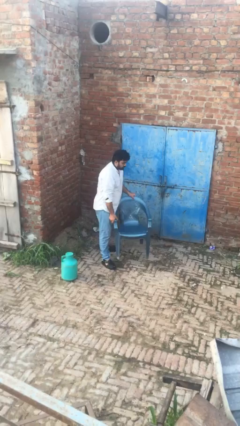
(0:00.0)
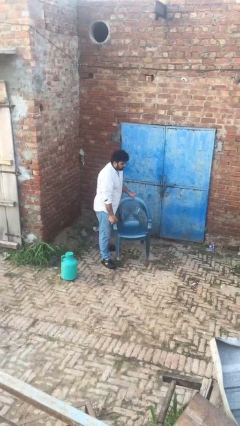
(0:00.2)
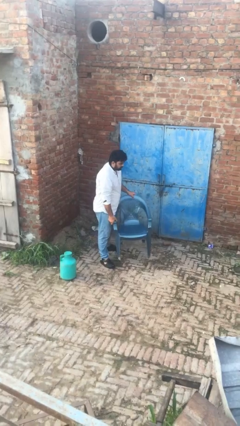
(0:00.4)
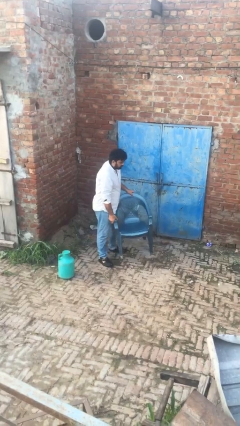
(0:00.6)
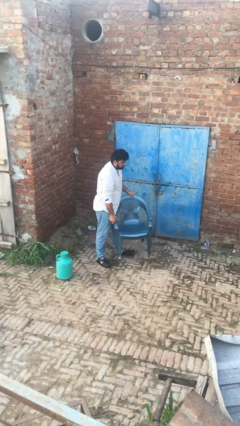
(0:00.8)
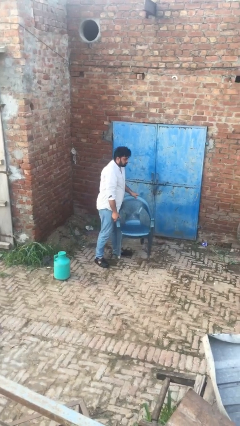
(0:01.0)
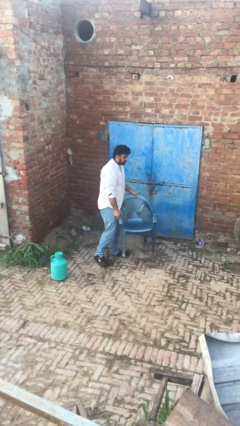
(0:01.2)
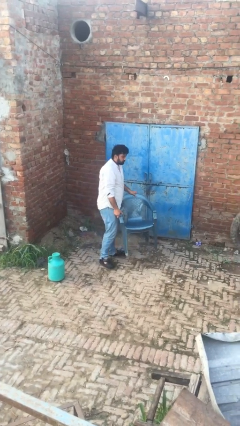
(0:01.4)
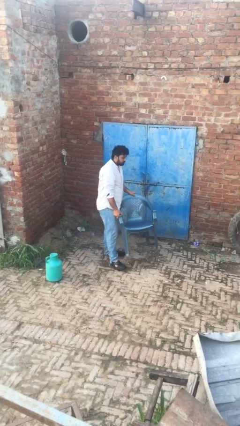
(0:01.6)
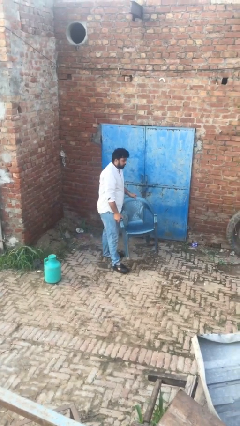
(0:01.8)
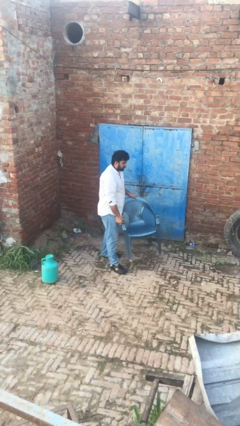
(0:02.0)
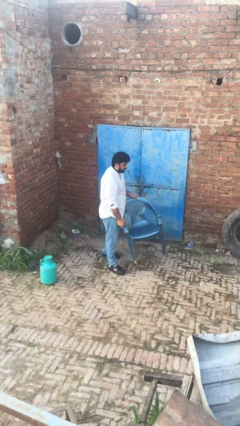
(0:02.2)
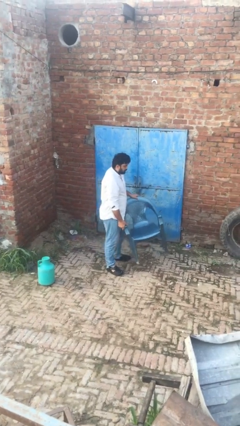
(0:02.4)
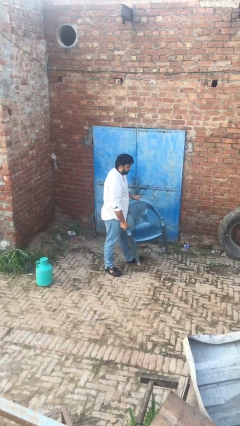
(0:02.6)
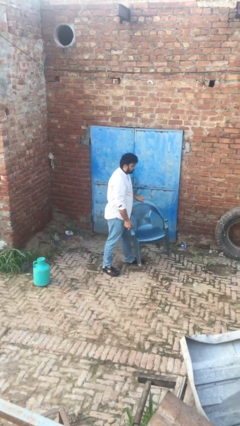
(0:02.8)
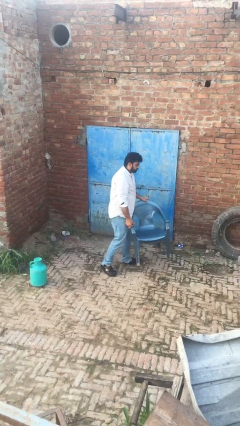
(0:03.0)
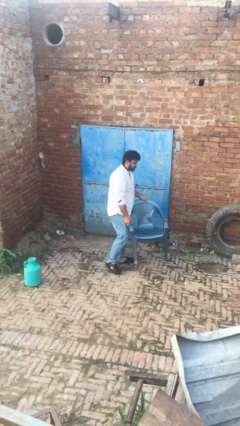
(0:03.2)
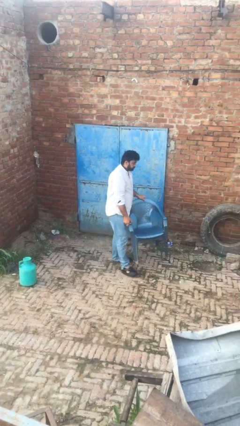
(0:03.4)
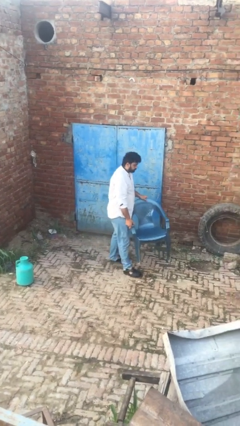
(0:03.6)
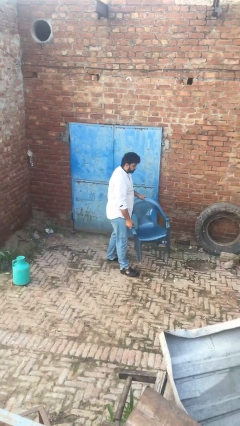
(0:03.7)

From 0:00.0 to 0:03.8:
person carries heavy object

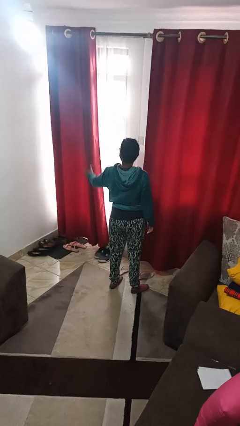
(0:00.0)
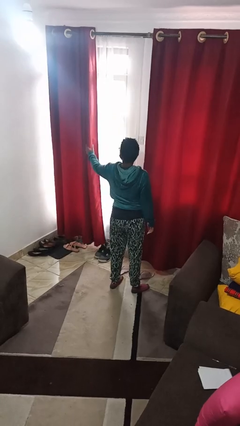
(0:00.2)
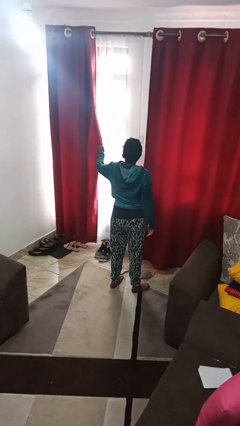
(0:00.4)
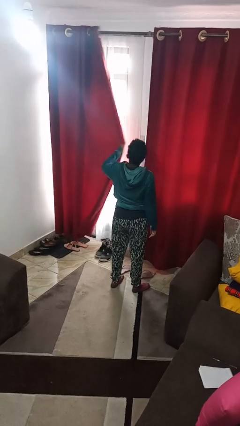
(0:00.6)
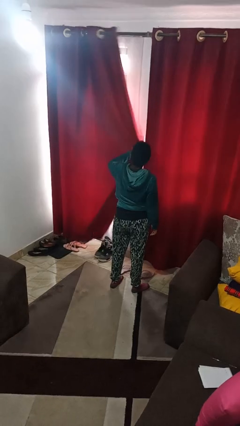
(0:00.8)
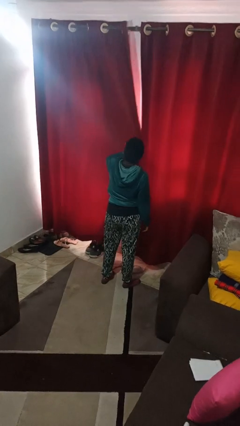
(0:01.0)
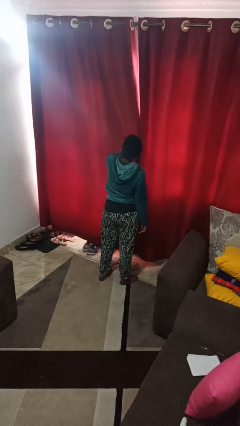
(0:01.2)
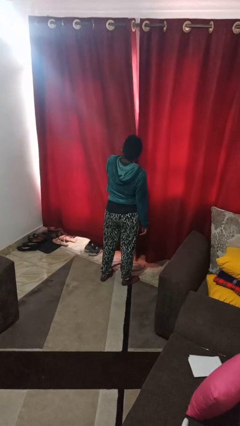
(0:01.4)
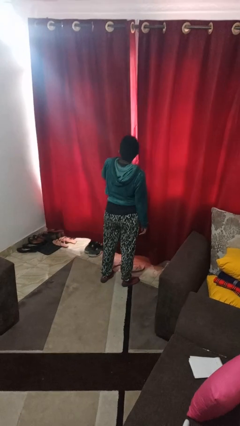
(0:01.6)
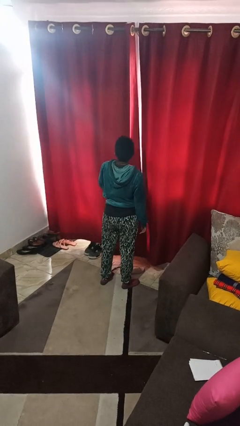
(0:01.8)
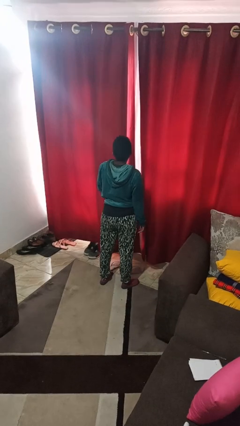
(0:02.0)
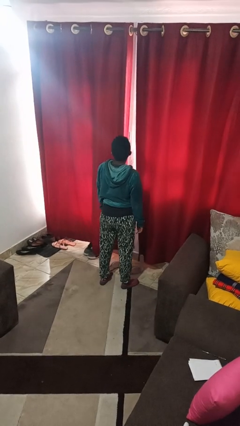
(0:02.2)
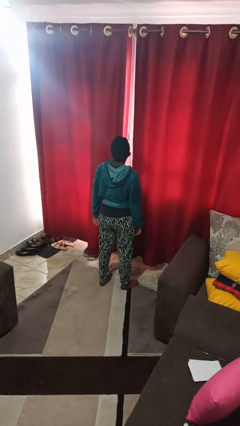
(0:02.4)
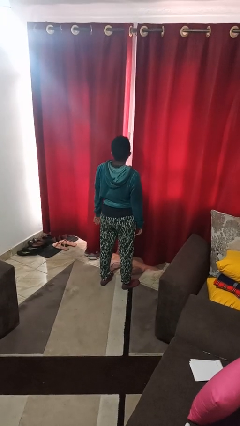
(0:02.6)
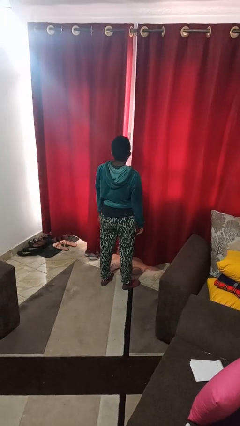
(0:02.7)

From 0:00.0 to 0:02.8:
person closes curtains

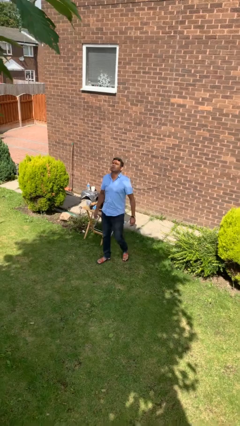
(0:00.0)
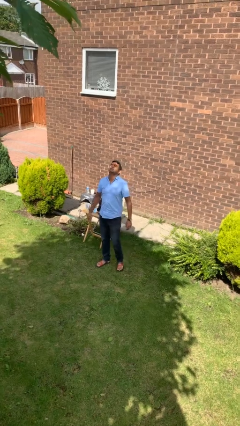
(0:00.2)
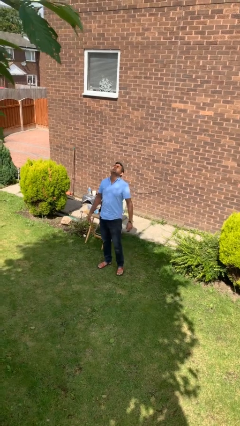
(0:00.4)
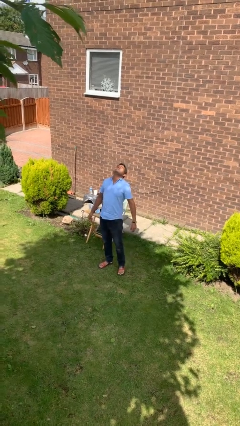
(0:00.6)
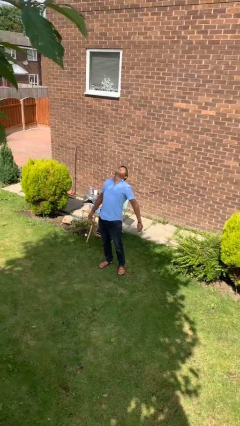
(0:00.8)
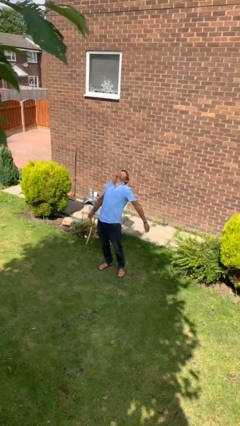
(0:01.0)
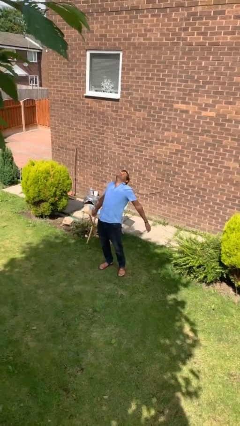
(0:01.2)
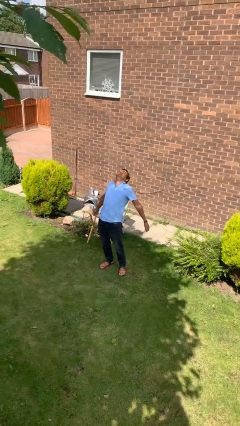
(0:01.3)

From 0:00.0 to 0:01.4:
person stretches back

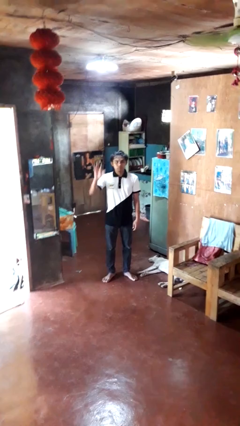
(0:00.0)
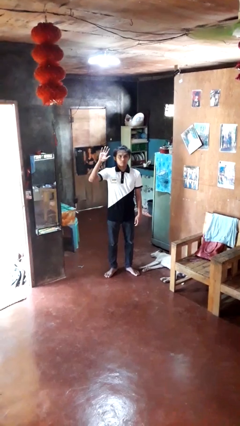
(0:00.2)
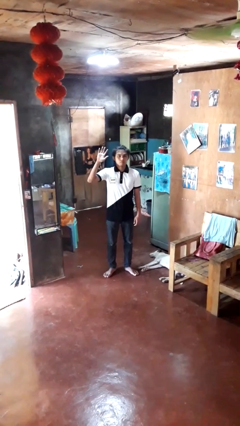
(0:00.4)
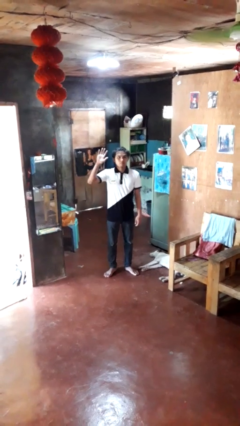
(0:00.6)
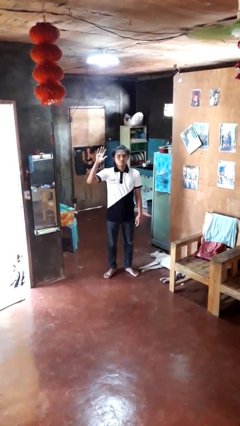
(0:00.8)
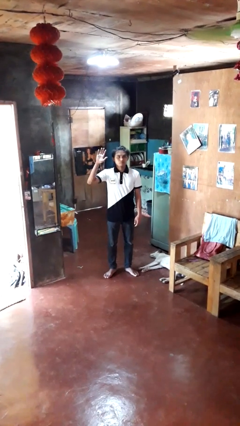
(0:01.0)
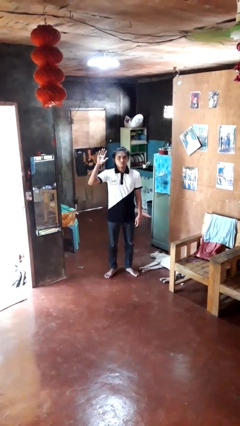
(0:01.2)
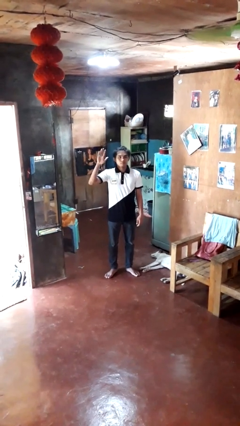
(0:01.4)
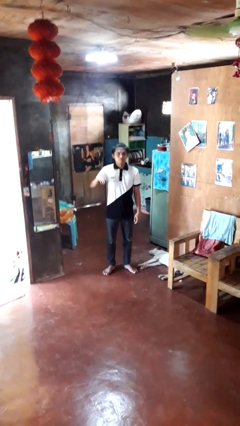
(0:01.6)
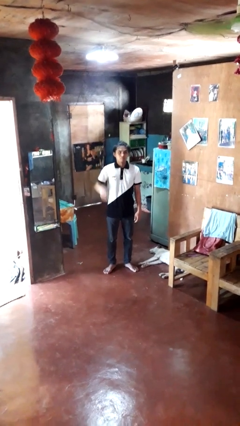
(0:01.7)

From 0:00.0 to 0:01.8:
person gestures raise hand

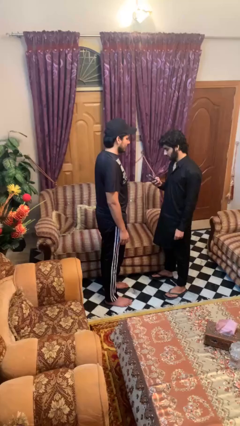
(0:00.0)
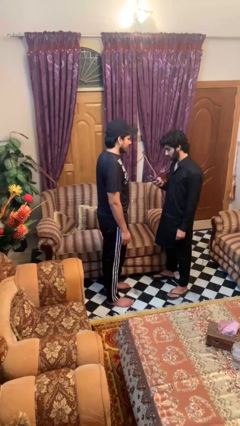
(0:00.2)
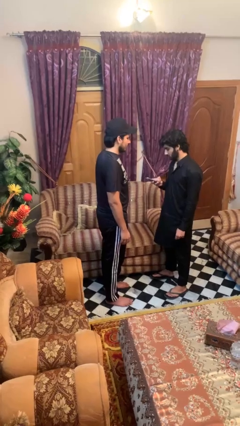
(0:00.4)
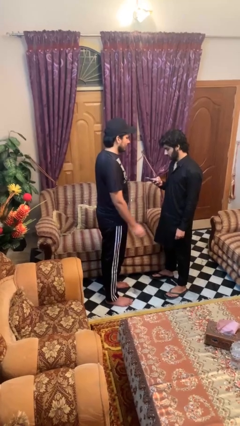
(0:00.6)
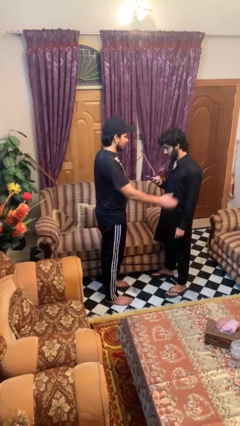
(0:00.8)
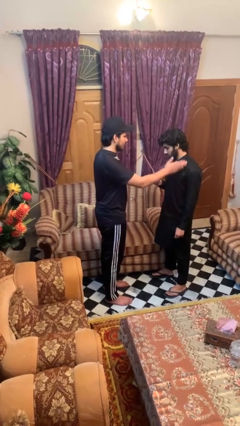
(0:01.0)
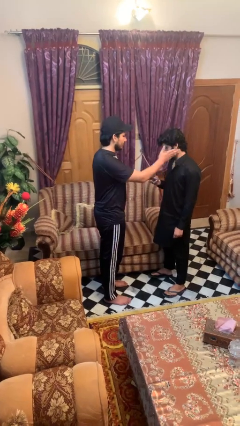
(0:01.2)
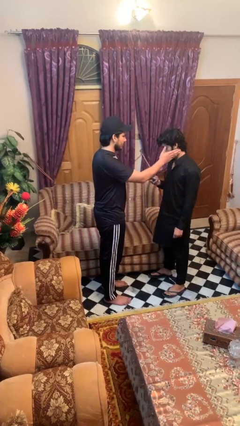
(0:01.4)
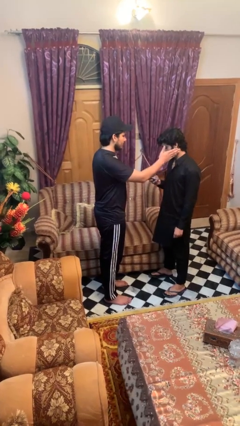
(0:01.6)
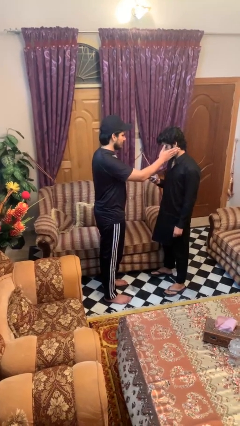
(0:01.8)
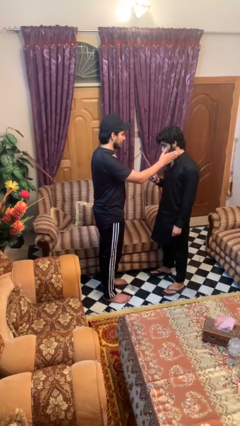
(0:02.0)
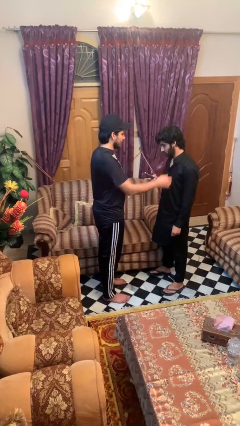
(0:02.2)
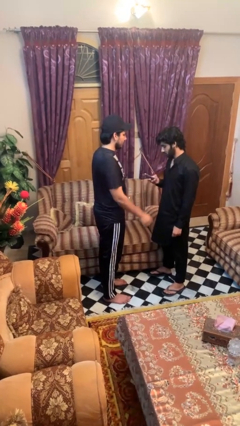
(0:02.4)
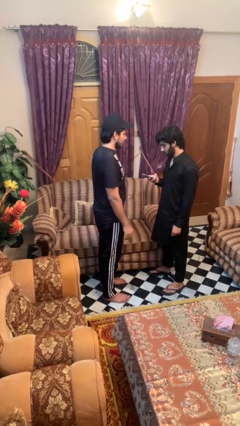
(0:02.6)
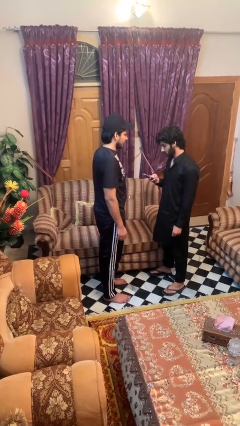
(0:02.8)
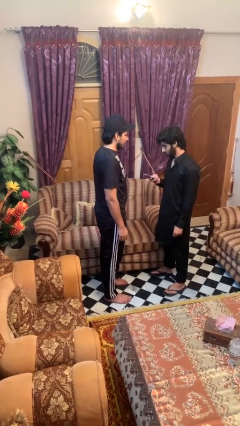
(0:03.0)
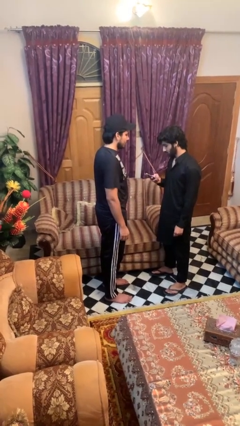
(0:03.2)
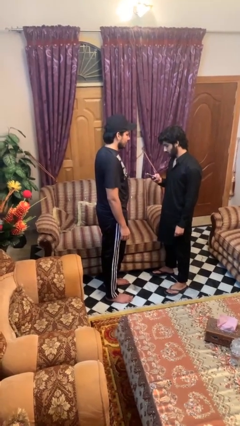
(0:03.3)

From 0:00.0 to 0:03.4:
person touches face of person

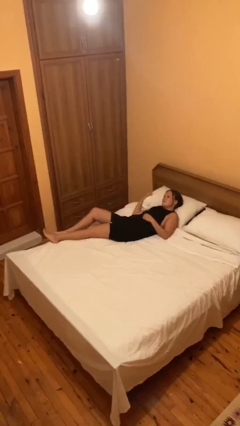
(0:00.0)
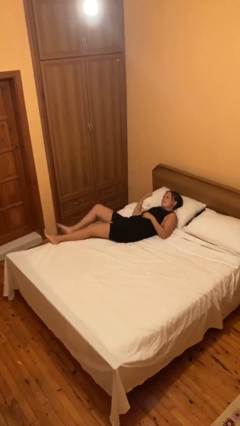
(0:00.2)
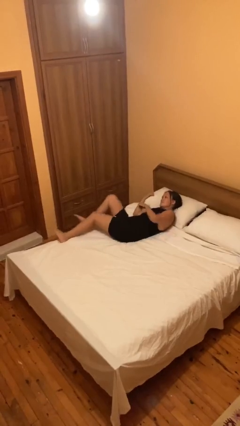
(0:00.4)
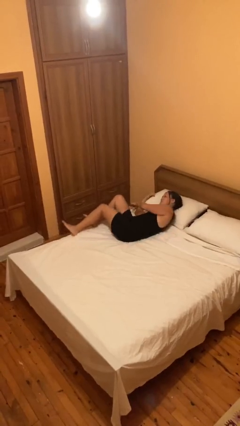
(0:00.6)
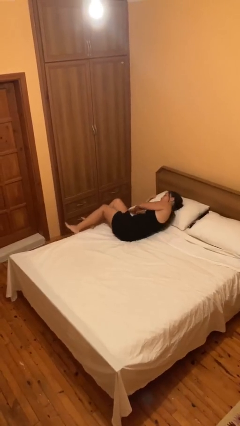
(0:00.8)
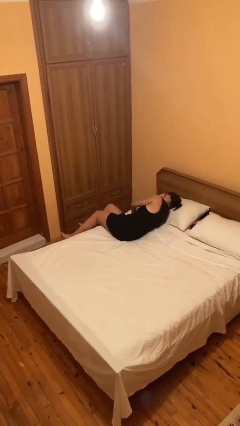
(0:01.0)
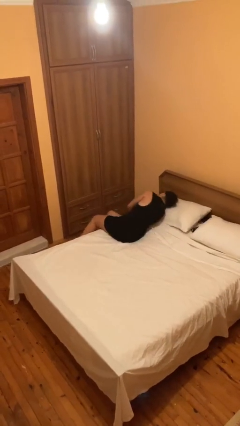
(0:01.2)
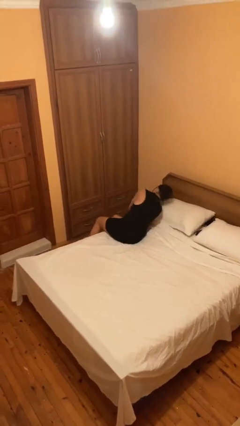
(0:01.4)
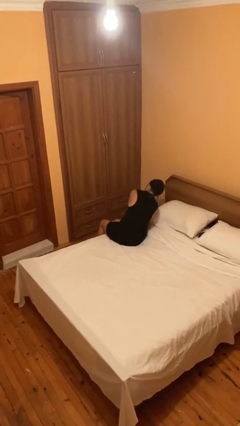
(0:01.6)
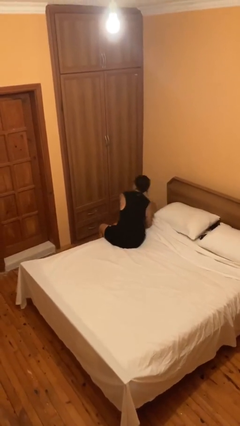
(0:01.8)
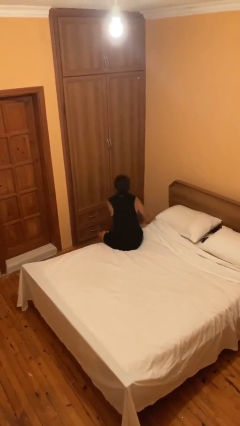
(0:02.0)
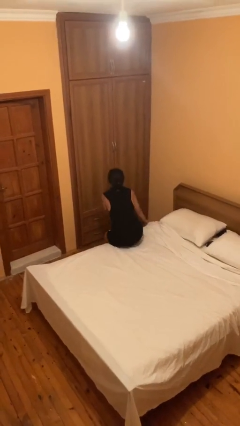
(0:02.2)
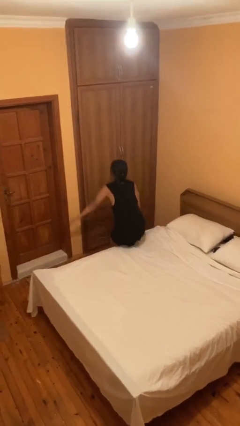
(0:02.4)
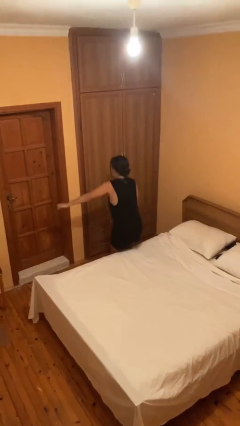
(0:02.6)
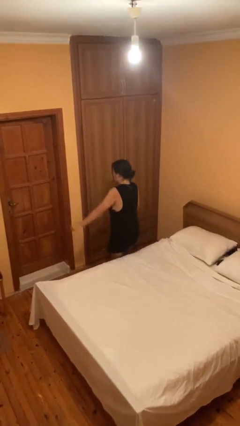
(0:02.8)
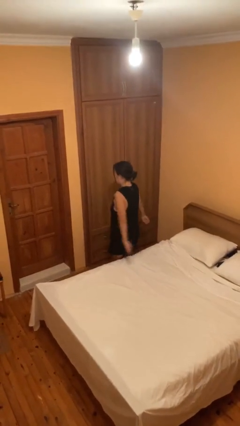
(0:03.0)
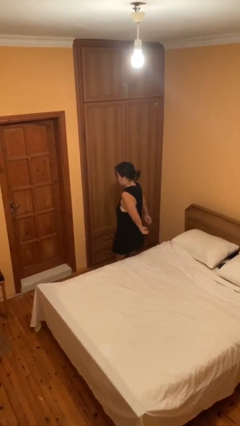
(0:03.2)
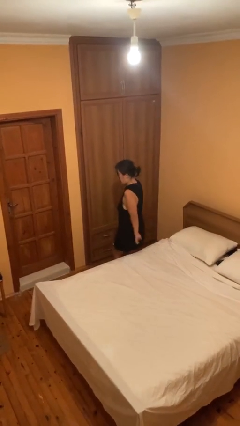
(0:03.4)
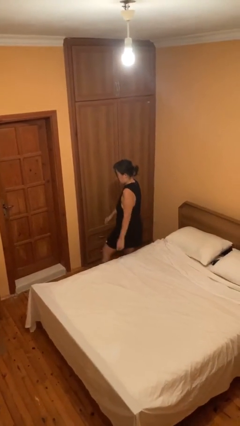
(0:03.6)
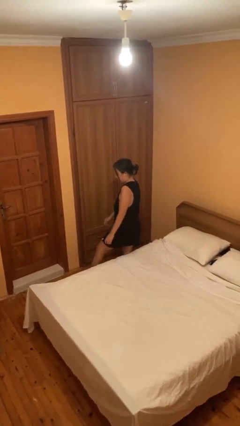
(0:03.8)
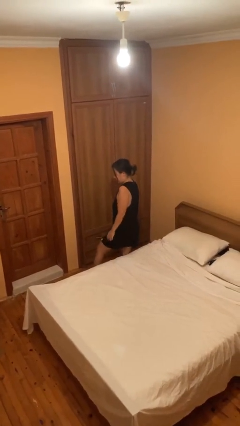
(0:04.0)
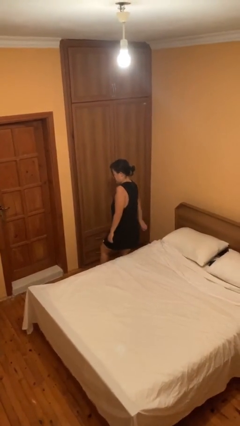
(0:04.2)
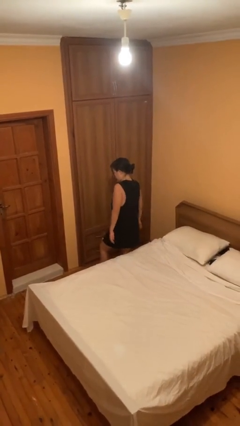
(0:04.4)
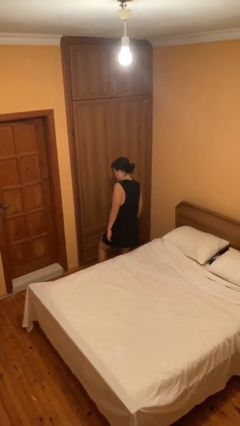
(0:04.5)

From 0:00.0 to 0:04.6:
person stands up
